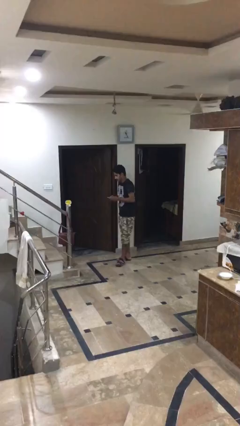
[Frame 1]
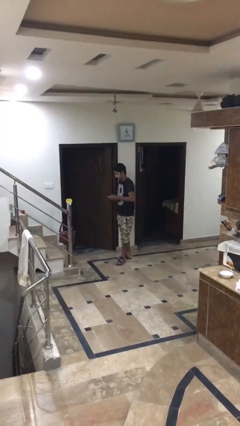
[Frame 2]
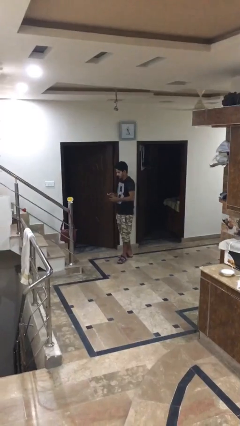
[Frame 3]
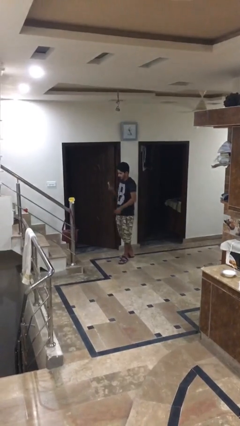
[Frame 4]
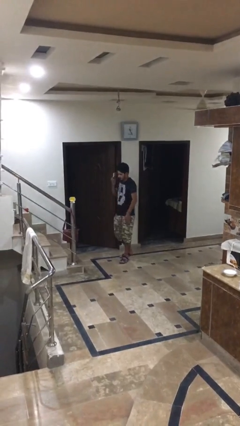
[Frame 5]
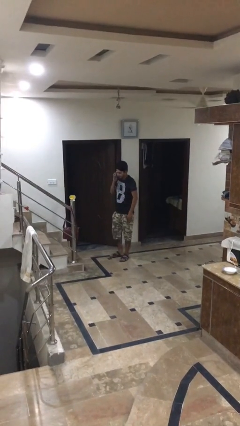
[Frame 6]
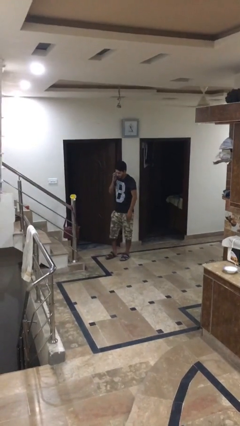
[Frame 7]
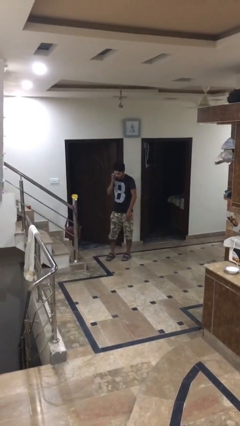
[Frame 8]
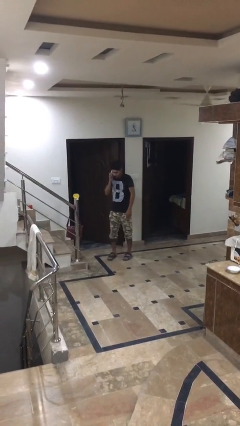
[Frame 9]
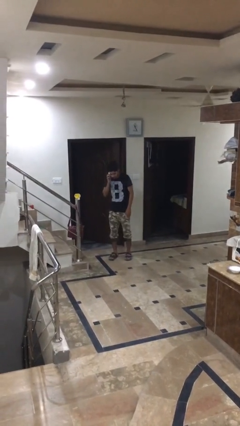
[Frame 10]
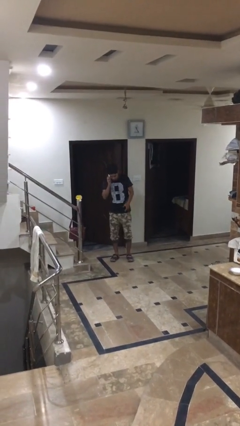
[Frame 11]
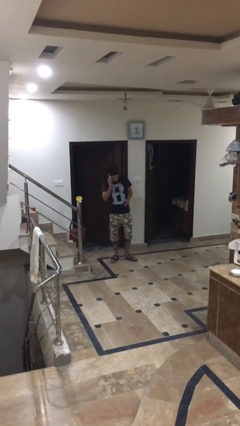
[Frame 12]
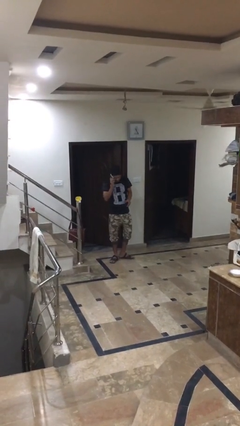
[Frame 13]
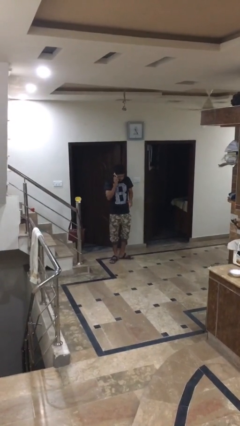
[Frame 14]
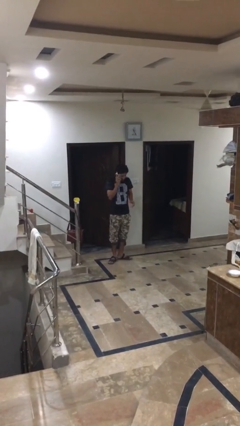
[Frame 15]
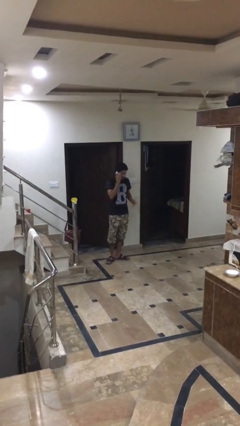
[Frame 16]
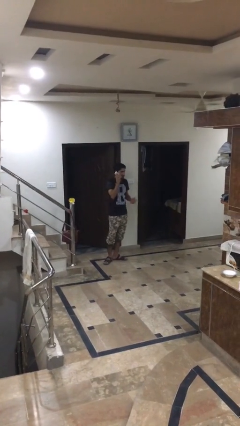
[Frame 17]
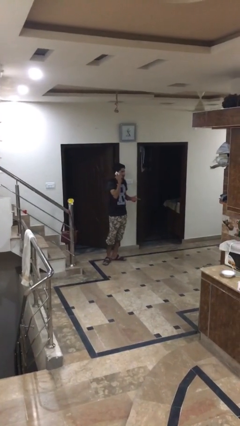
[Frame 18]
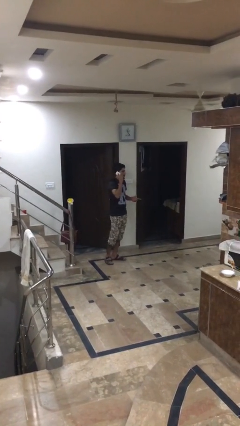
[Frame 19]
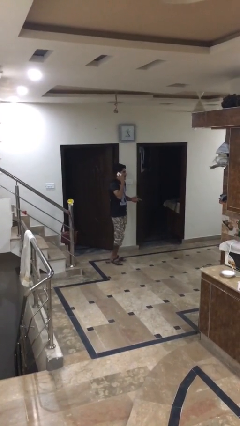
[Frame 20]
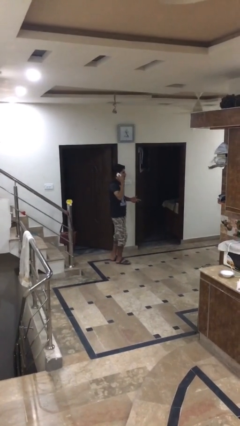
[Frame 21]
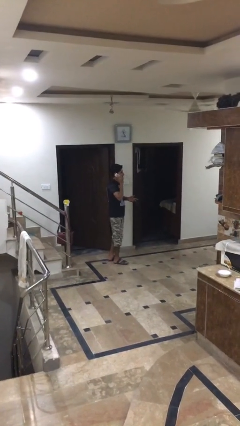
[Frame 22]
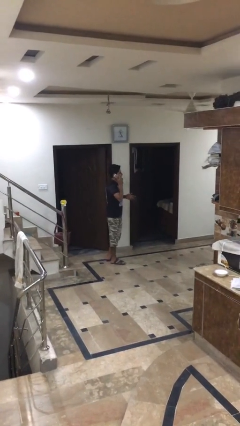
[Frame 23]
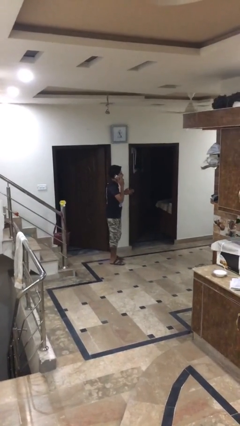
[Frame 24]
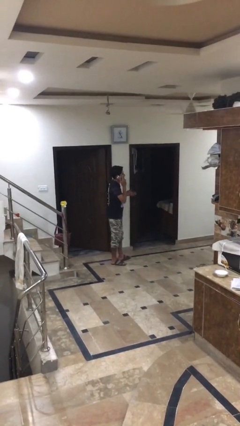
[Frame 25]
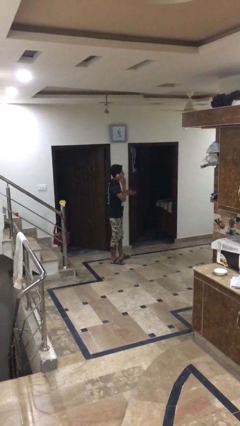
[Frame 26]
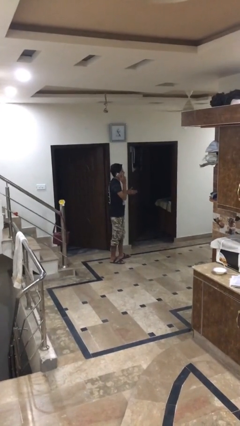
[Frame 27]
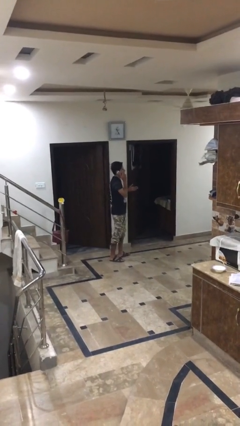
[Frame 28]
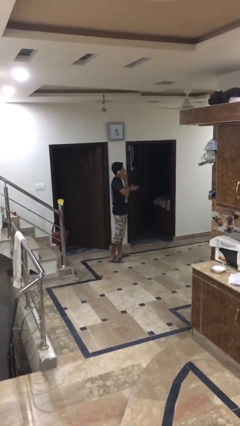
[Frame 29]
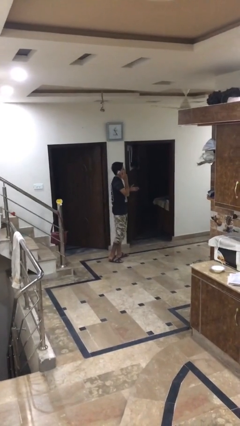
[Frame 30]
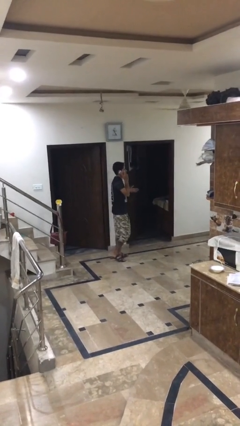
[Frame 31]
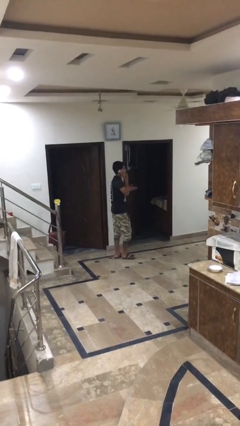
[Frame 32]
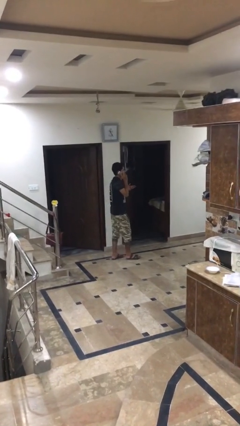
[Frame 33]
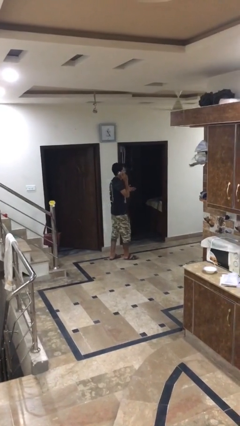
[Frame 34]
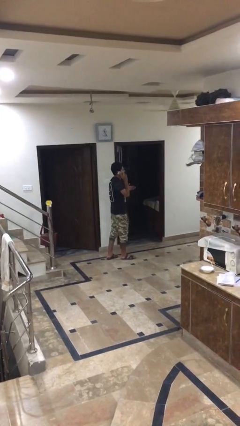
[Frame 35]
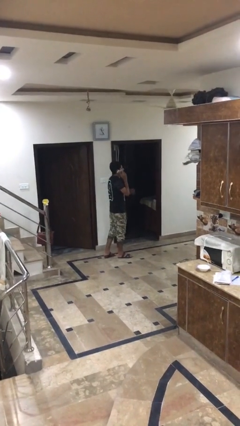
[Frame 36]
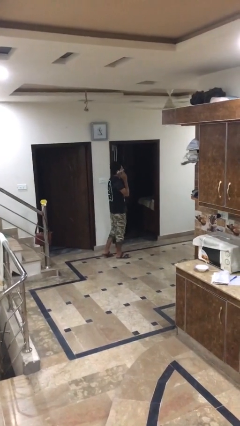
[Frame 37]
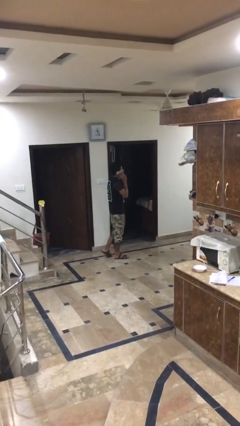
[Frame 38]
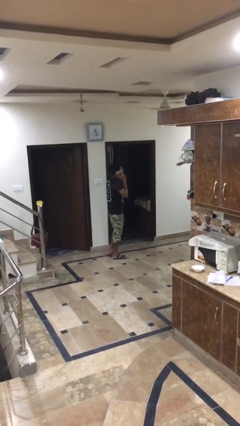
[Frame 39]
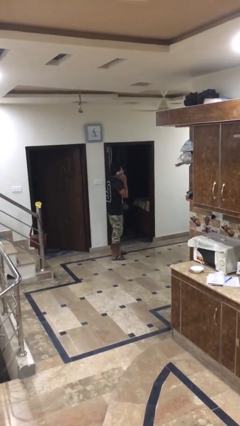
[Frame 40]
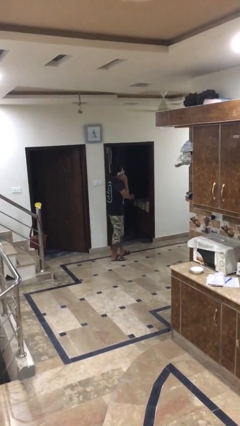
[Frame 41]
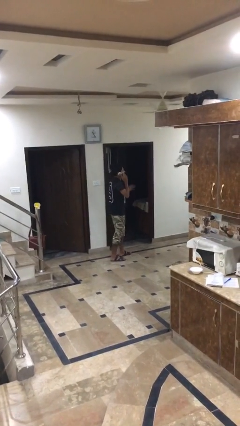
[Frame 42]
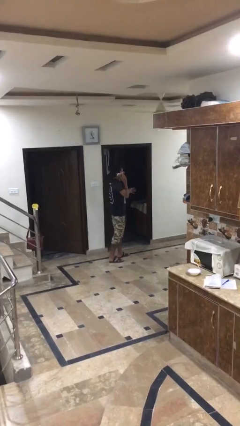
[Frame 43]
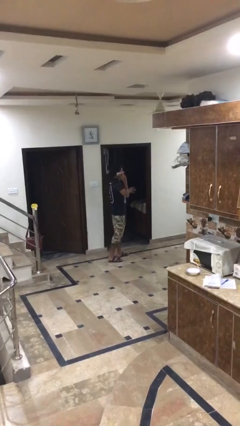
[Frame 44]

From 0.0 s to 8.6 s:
person talks on phone

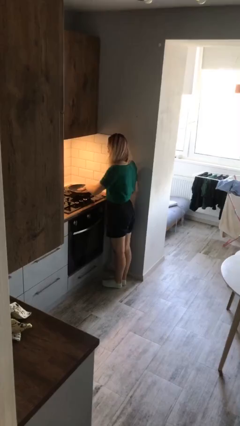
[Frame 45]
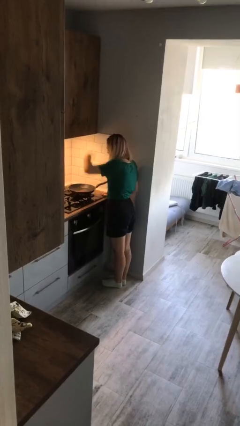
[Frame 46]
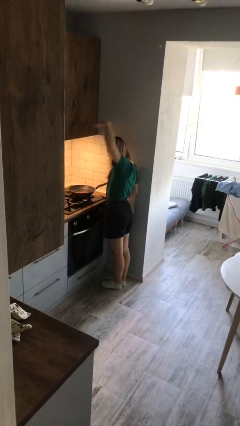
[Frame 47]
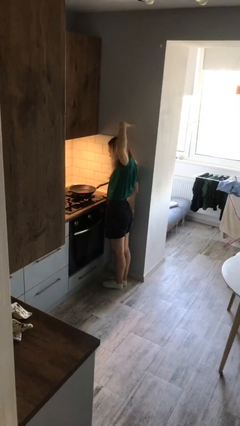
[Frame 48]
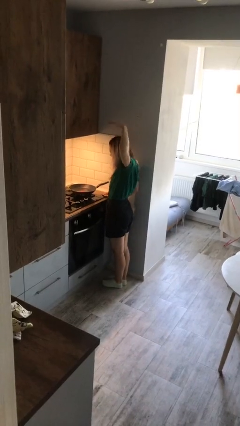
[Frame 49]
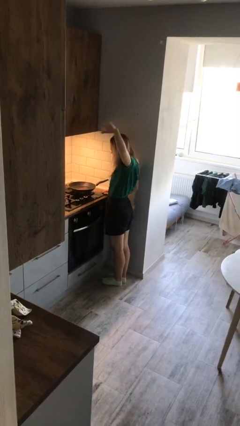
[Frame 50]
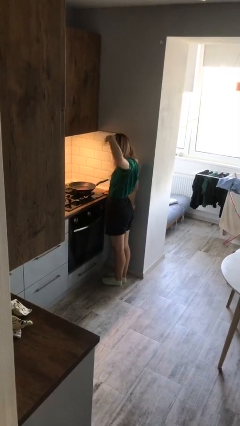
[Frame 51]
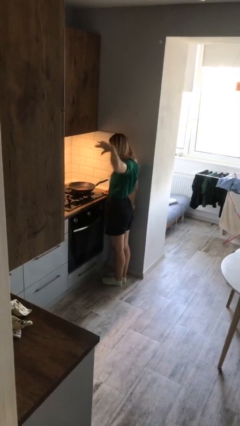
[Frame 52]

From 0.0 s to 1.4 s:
person burns hand

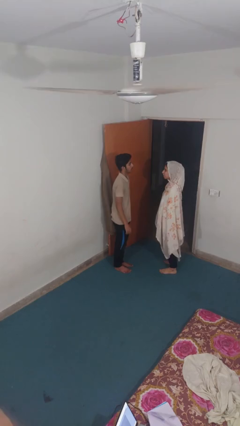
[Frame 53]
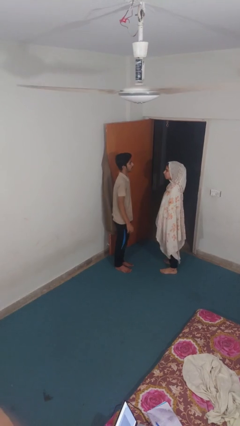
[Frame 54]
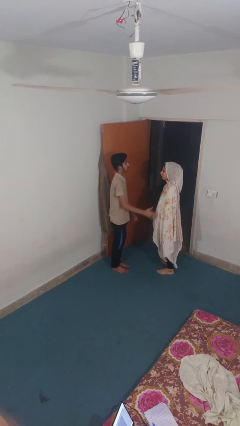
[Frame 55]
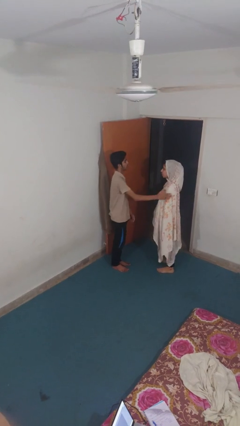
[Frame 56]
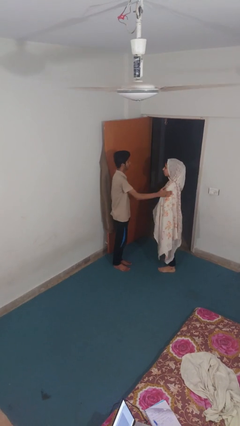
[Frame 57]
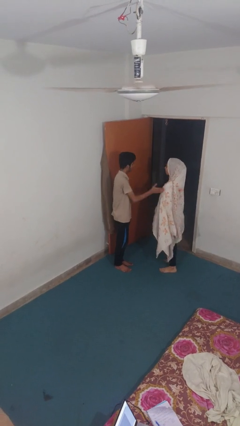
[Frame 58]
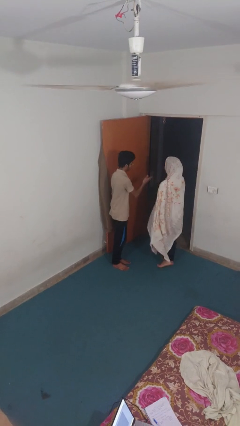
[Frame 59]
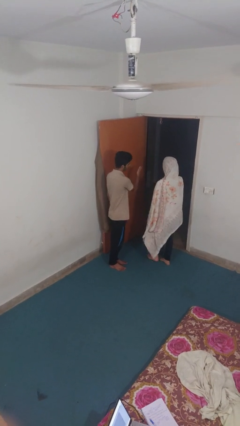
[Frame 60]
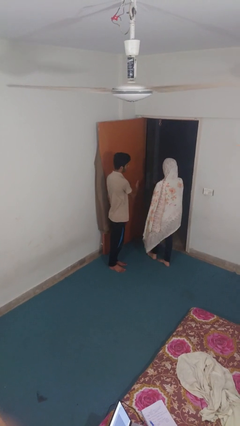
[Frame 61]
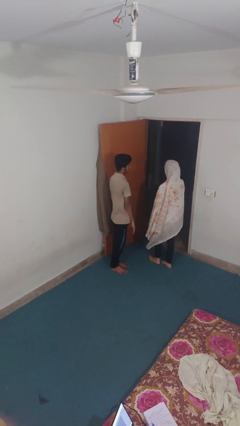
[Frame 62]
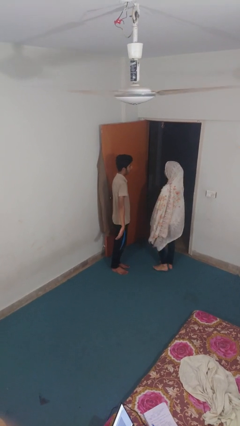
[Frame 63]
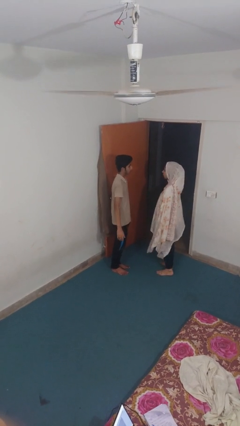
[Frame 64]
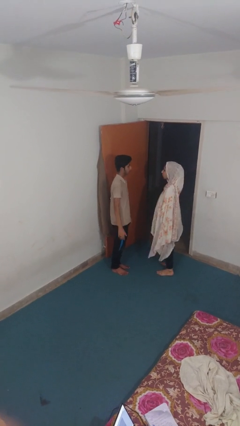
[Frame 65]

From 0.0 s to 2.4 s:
person shoves person

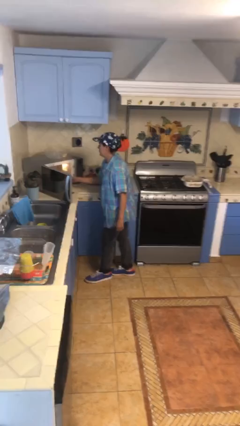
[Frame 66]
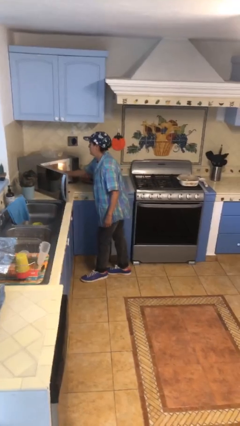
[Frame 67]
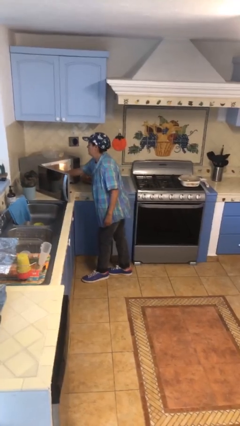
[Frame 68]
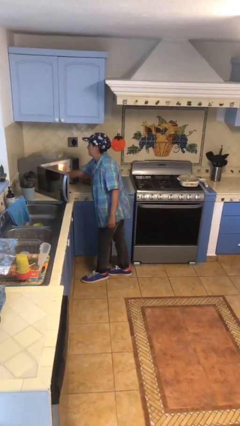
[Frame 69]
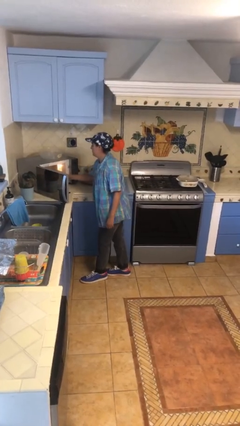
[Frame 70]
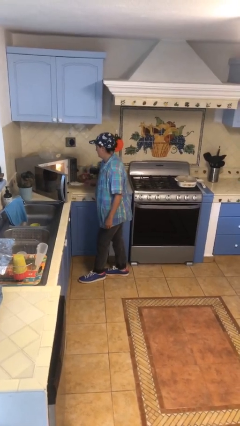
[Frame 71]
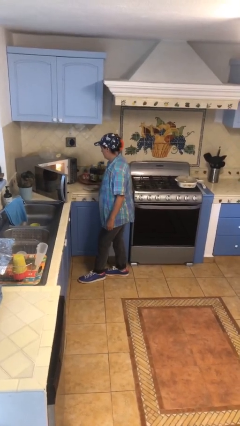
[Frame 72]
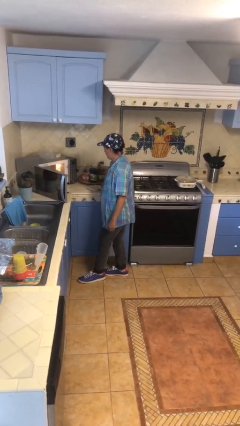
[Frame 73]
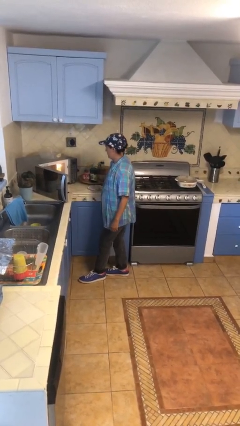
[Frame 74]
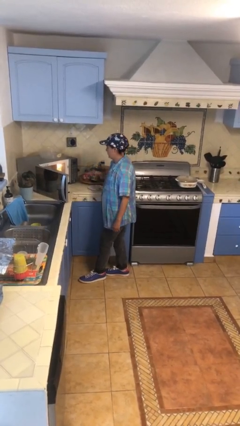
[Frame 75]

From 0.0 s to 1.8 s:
person takes object from microwave

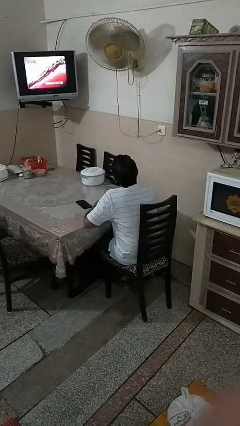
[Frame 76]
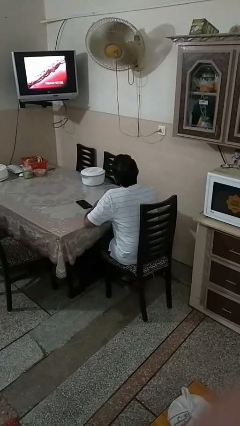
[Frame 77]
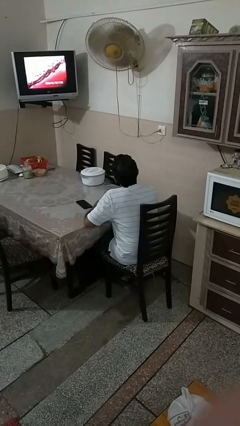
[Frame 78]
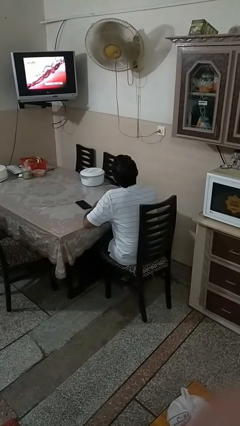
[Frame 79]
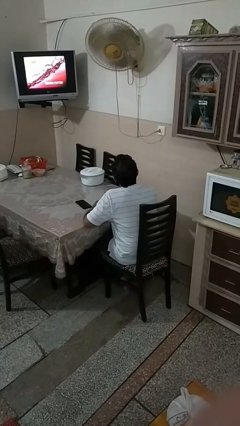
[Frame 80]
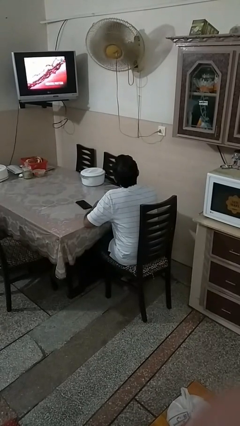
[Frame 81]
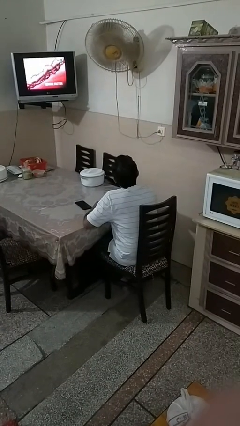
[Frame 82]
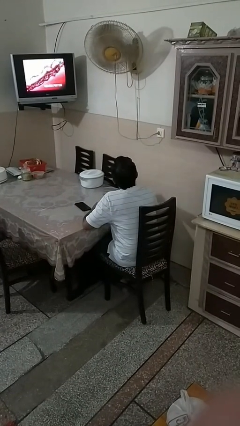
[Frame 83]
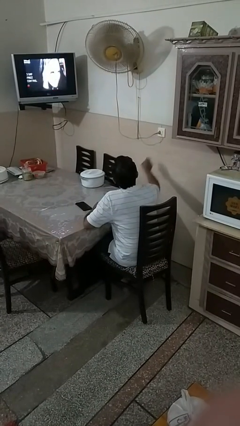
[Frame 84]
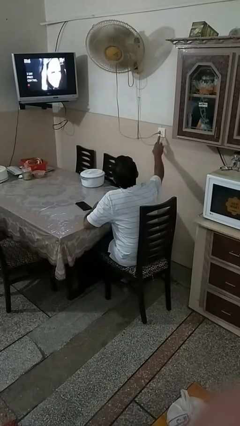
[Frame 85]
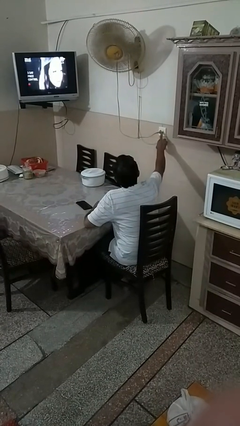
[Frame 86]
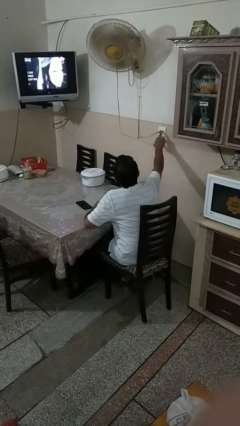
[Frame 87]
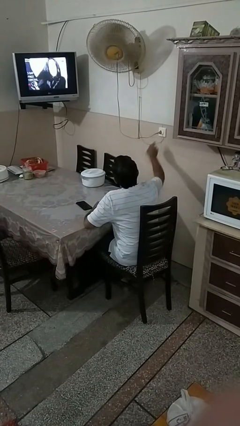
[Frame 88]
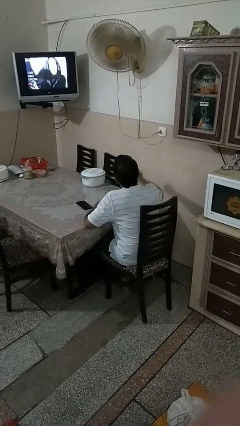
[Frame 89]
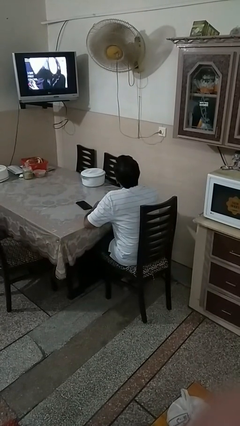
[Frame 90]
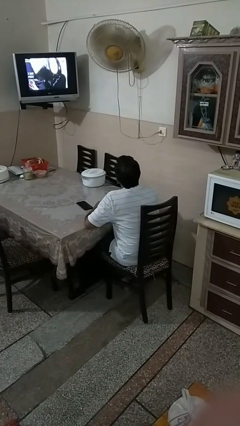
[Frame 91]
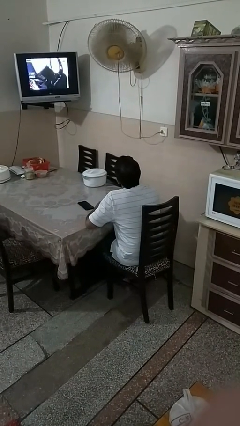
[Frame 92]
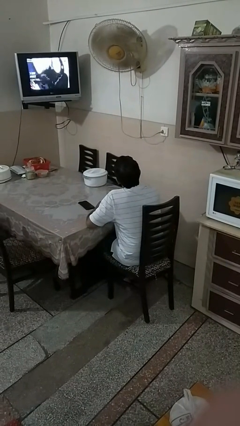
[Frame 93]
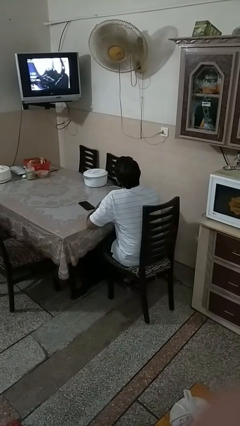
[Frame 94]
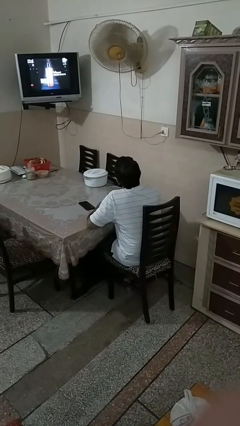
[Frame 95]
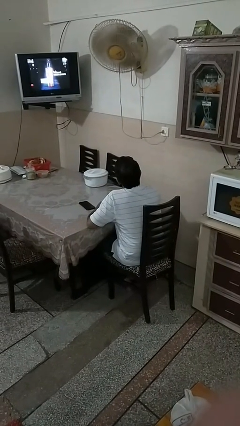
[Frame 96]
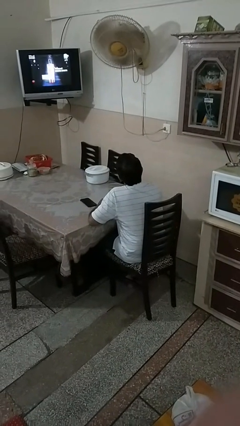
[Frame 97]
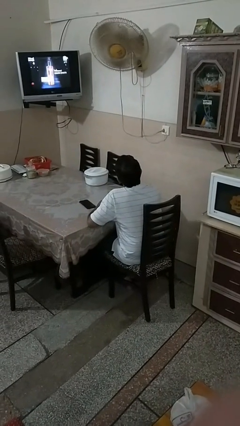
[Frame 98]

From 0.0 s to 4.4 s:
person turns off fan
